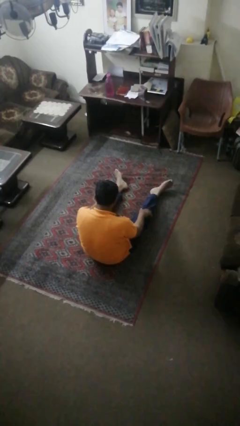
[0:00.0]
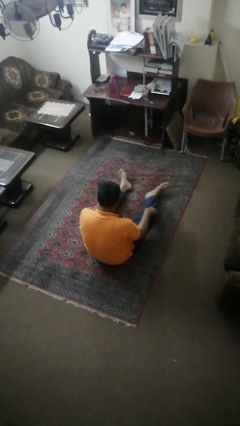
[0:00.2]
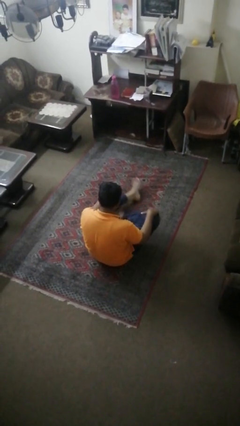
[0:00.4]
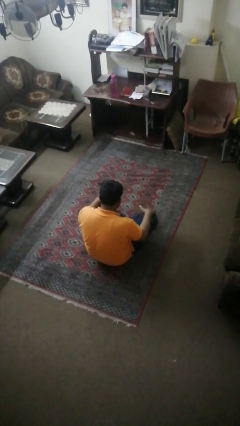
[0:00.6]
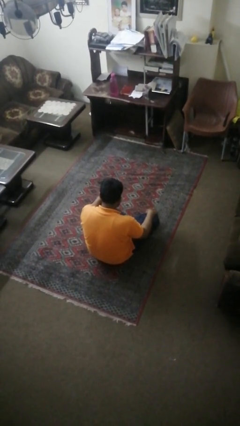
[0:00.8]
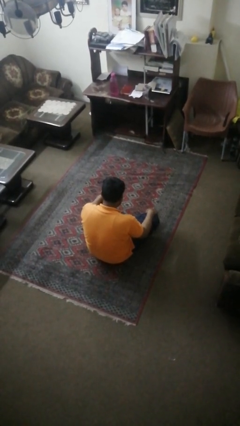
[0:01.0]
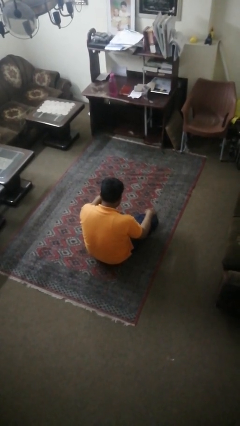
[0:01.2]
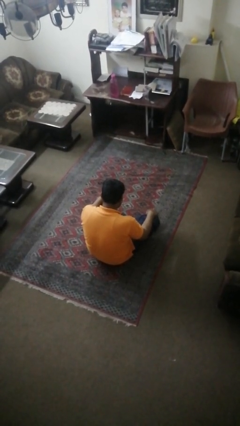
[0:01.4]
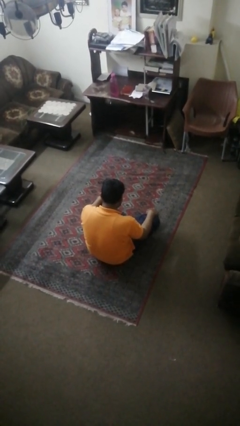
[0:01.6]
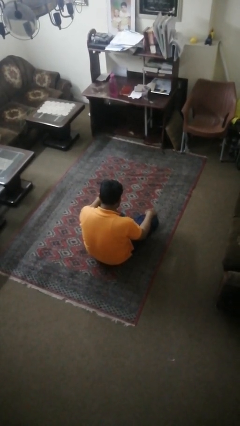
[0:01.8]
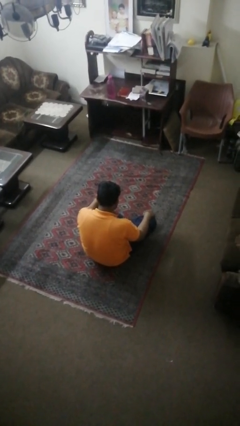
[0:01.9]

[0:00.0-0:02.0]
person crosses legs

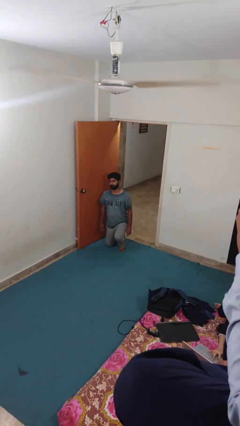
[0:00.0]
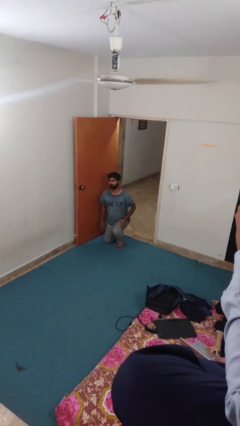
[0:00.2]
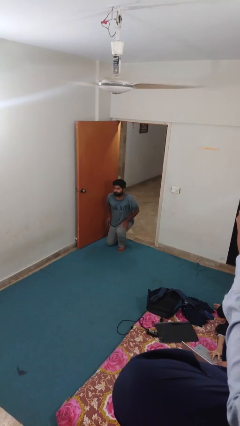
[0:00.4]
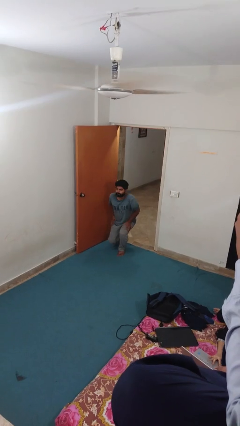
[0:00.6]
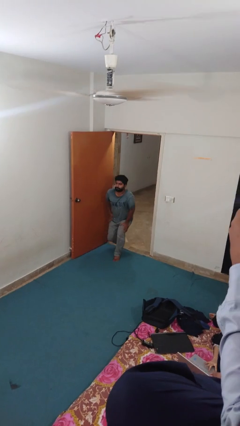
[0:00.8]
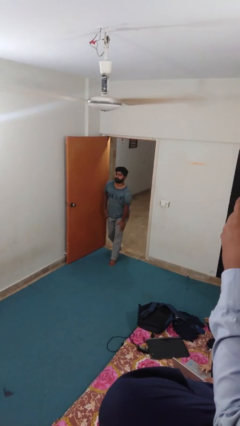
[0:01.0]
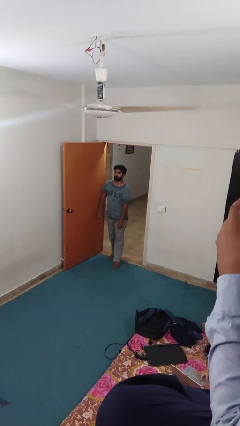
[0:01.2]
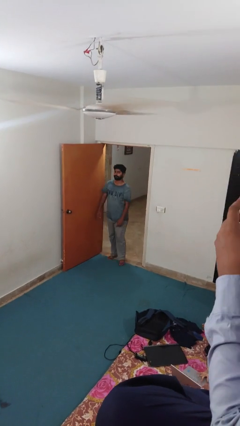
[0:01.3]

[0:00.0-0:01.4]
person stands up from floor

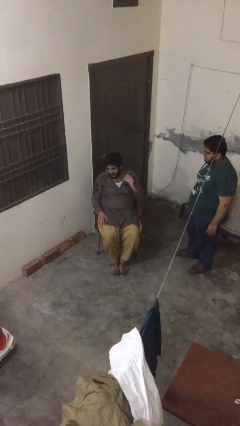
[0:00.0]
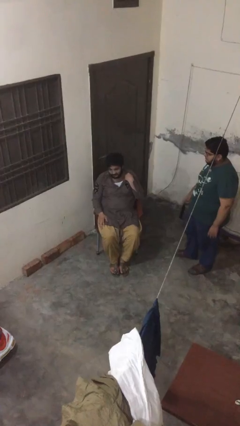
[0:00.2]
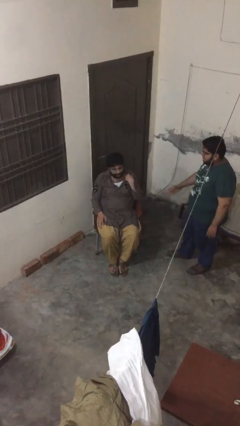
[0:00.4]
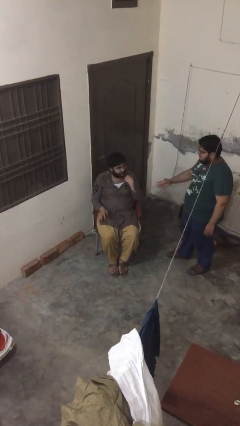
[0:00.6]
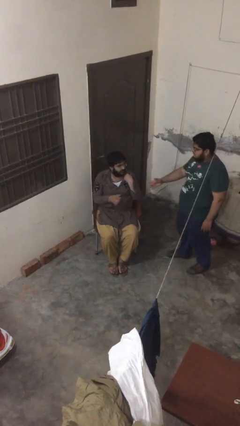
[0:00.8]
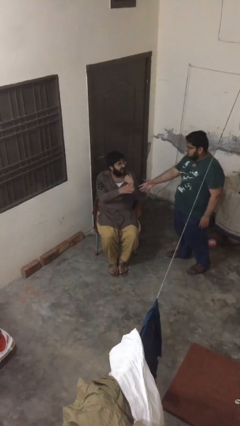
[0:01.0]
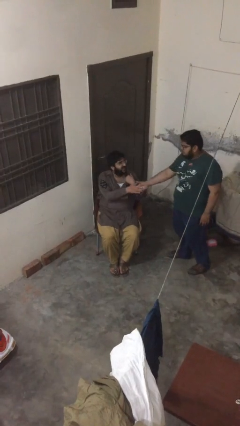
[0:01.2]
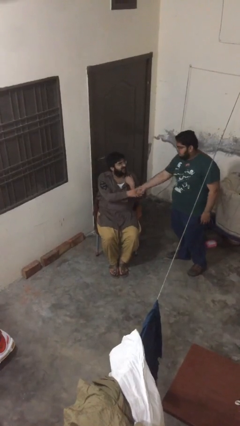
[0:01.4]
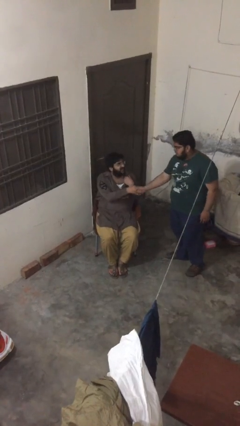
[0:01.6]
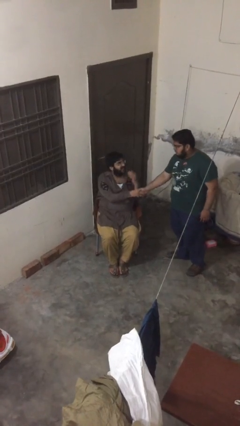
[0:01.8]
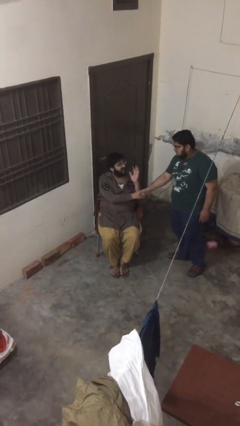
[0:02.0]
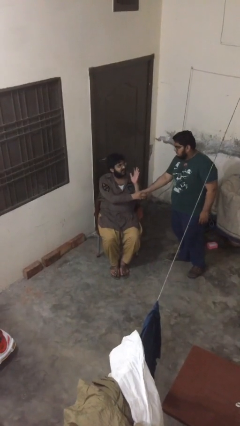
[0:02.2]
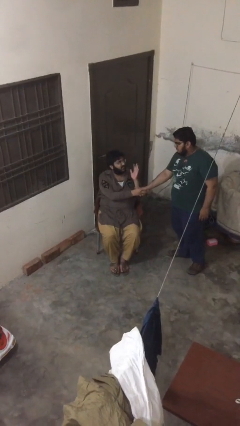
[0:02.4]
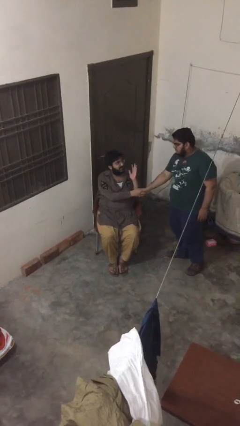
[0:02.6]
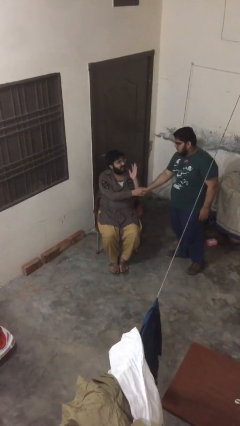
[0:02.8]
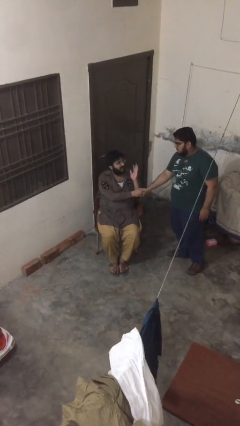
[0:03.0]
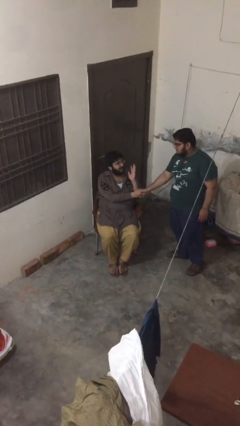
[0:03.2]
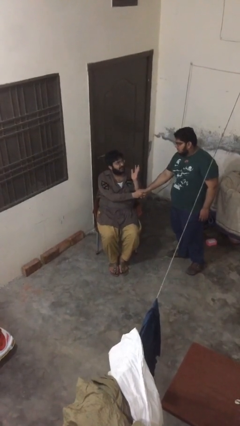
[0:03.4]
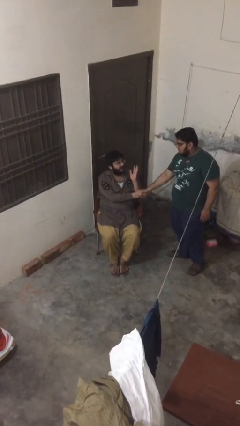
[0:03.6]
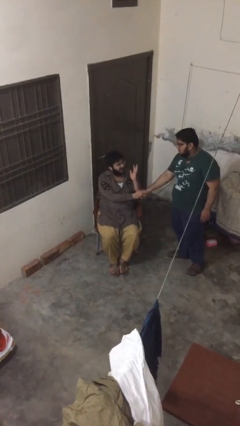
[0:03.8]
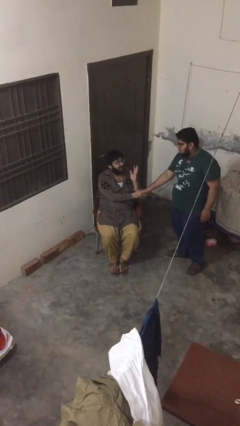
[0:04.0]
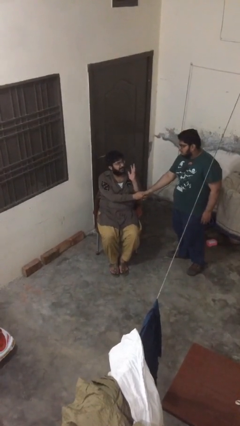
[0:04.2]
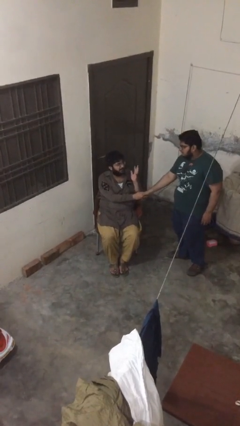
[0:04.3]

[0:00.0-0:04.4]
person shakes hand

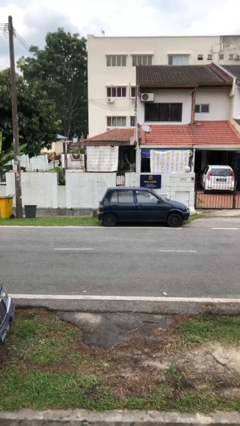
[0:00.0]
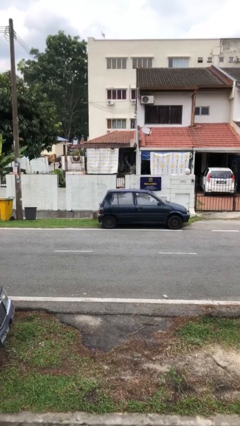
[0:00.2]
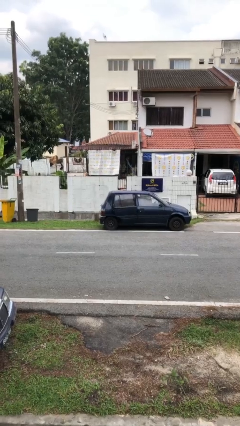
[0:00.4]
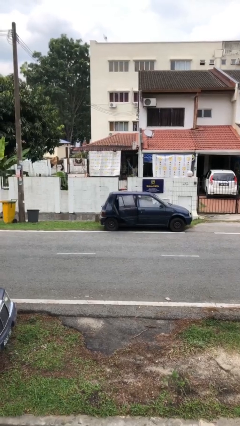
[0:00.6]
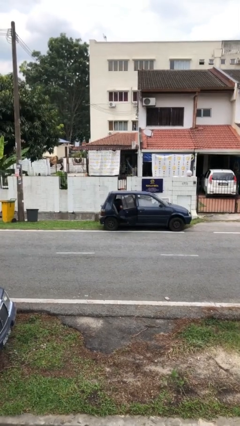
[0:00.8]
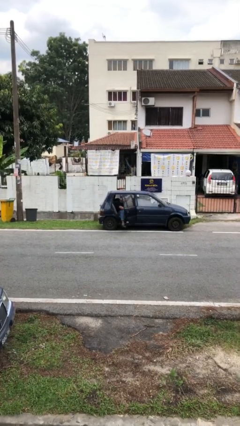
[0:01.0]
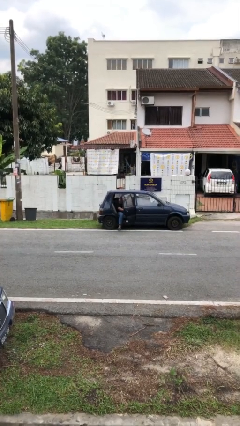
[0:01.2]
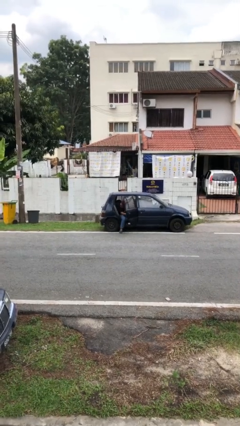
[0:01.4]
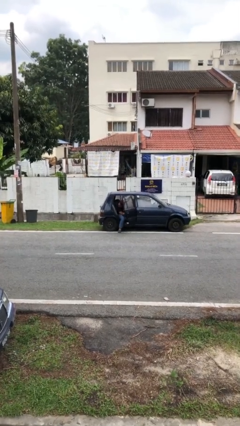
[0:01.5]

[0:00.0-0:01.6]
person opens car door

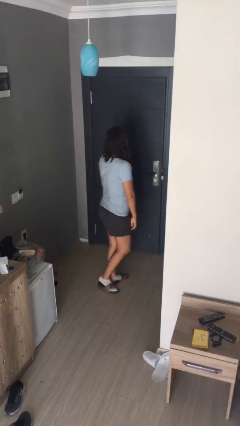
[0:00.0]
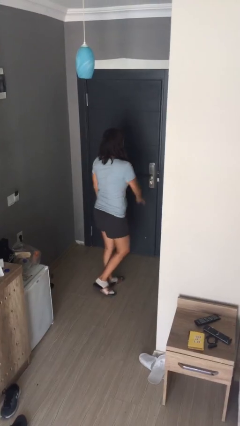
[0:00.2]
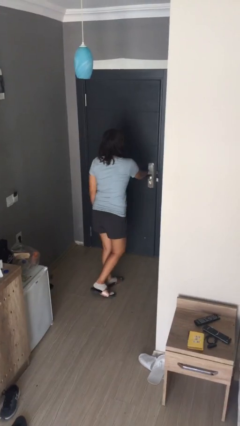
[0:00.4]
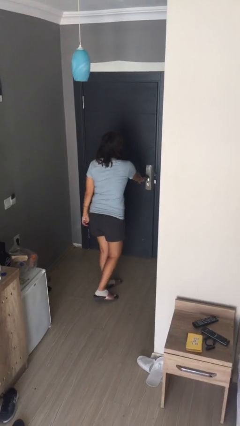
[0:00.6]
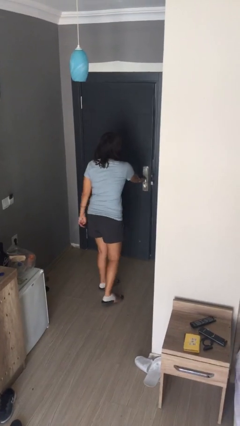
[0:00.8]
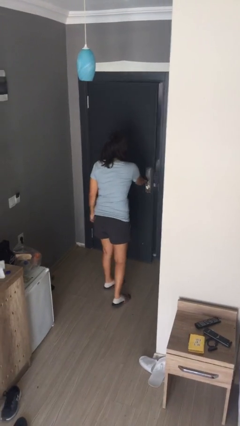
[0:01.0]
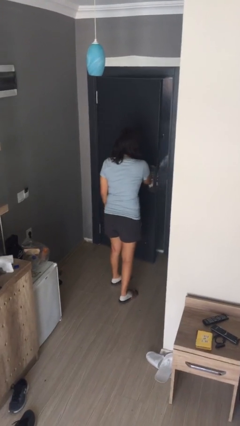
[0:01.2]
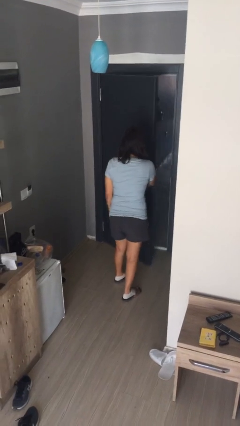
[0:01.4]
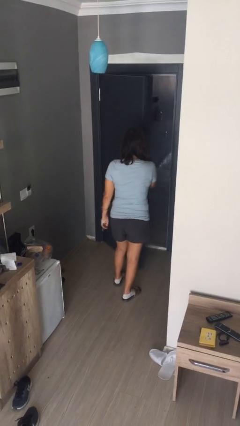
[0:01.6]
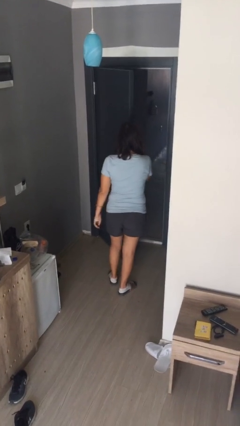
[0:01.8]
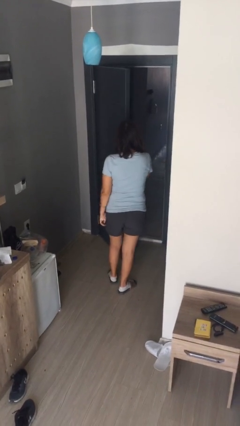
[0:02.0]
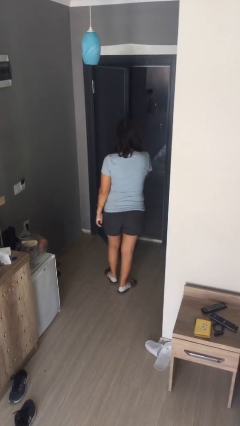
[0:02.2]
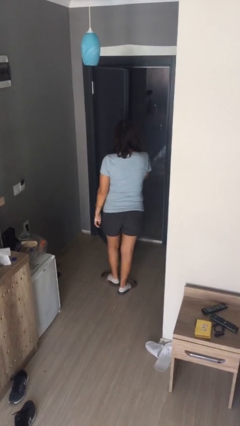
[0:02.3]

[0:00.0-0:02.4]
person opens facility door

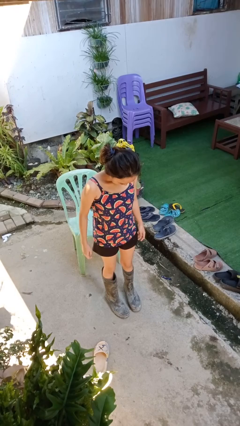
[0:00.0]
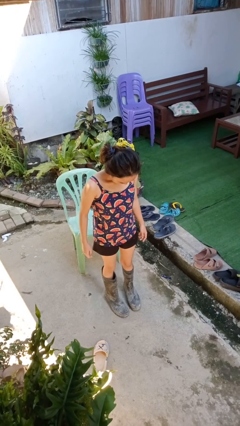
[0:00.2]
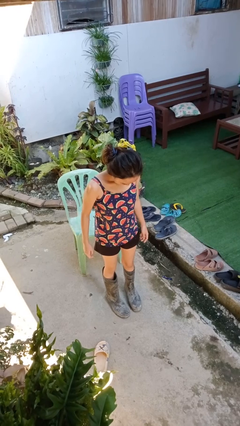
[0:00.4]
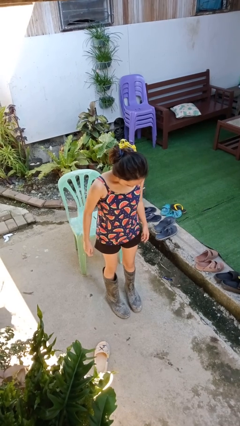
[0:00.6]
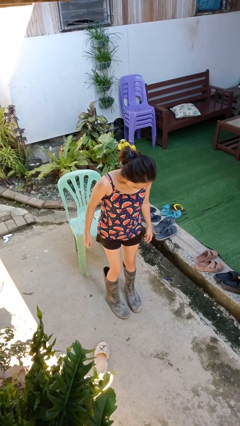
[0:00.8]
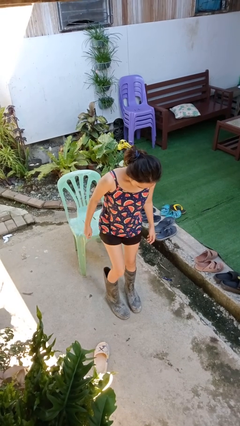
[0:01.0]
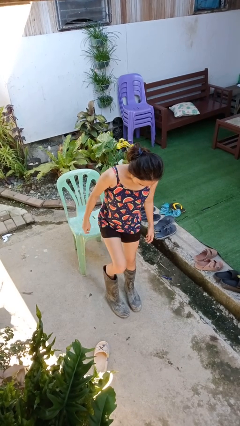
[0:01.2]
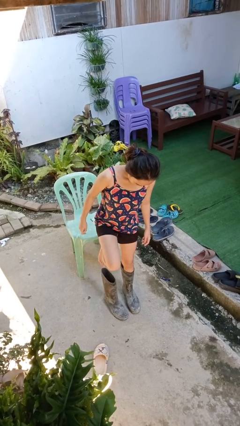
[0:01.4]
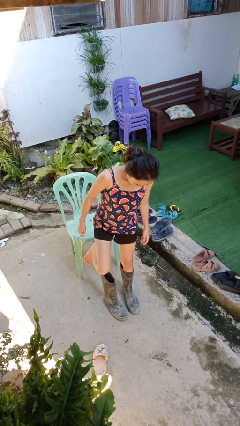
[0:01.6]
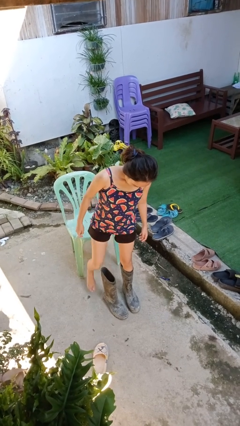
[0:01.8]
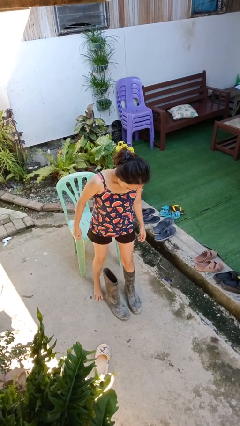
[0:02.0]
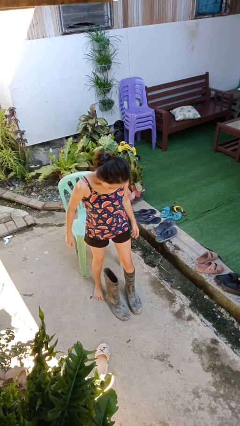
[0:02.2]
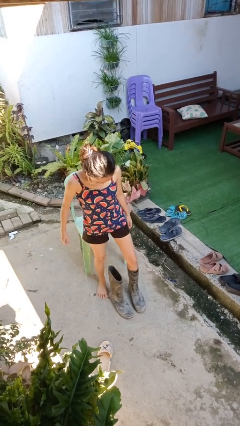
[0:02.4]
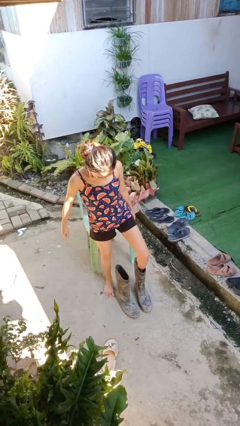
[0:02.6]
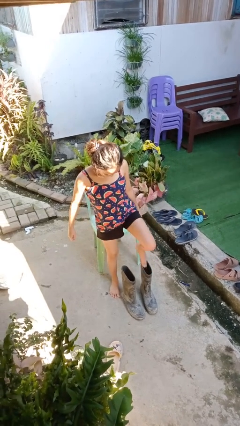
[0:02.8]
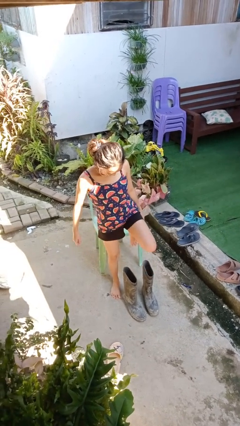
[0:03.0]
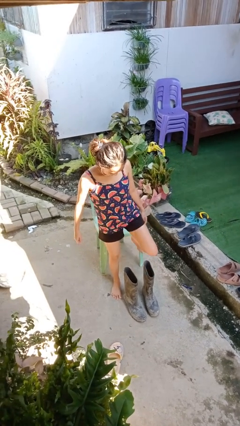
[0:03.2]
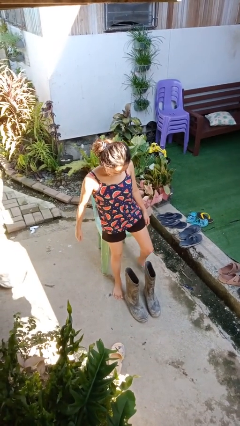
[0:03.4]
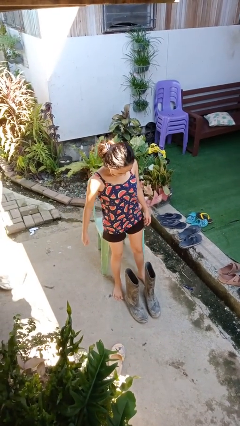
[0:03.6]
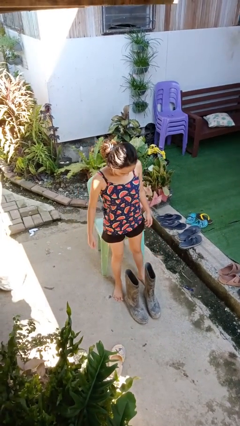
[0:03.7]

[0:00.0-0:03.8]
person takes off boots

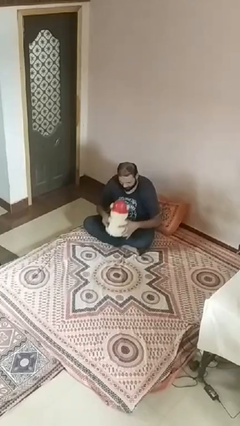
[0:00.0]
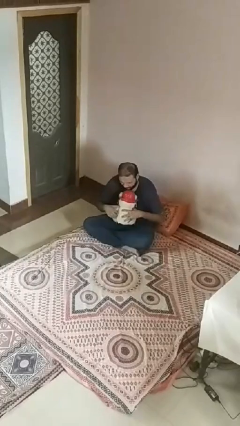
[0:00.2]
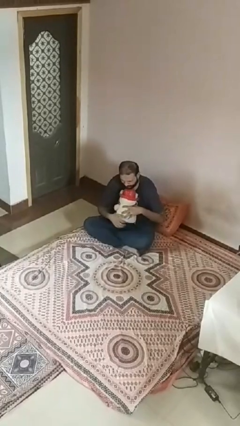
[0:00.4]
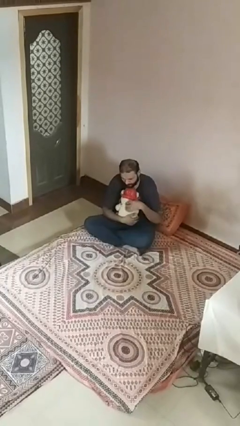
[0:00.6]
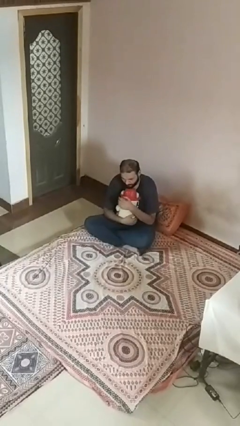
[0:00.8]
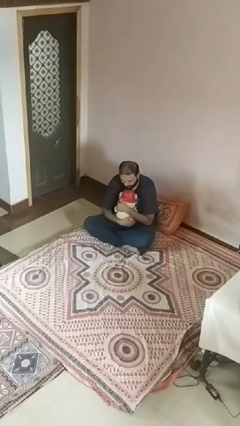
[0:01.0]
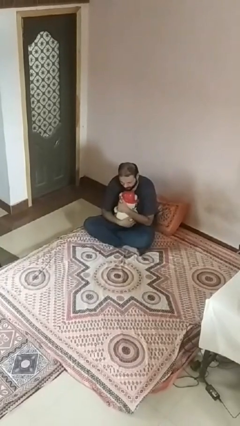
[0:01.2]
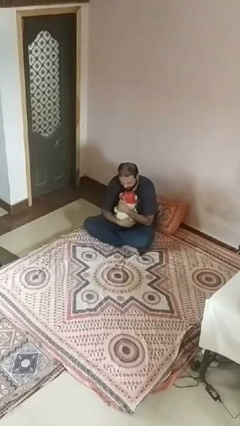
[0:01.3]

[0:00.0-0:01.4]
person hugs stuffed animal
